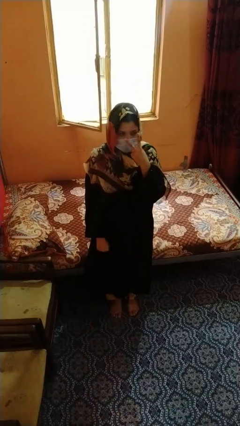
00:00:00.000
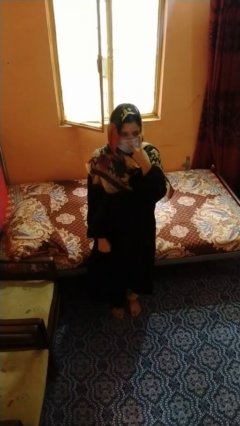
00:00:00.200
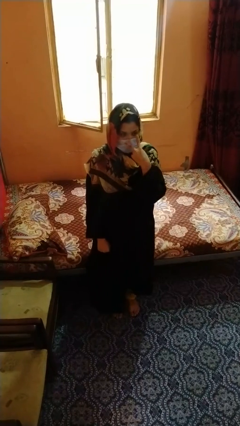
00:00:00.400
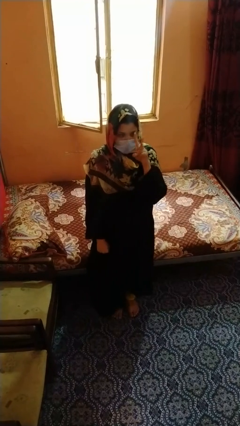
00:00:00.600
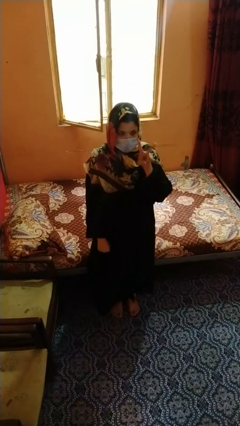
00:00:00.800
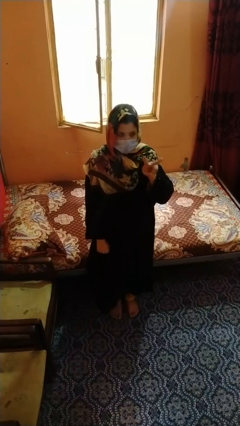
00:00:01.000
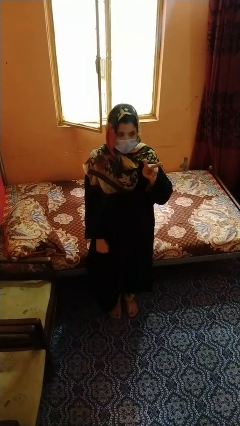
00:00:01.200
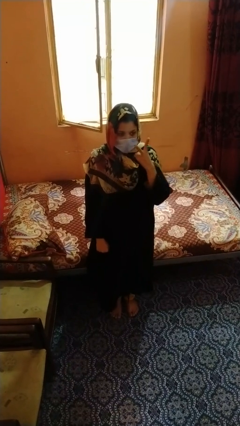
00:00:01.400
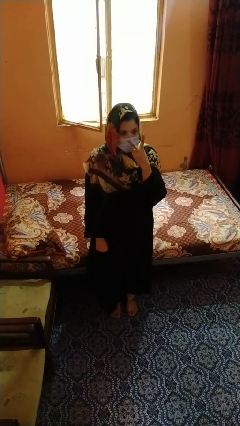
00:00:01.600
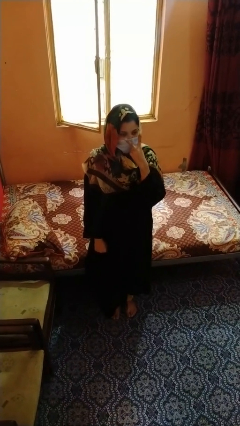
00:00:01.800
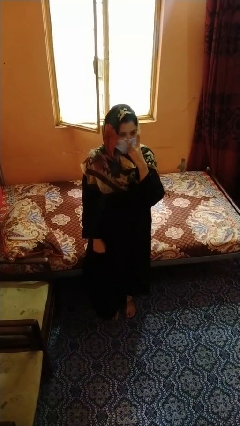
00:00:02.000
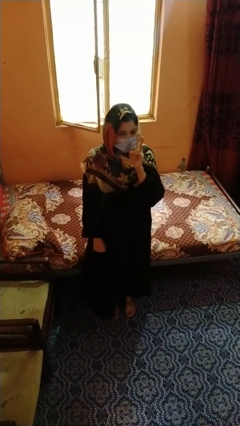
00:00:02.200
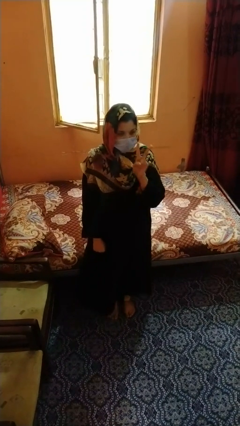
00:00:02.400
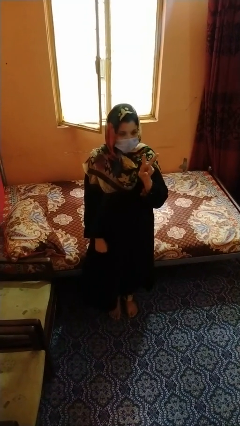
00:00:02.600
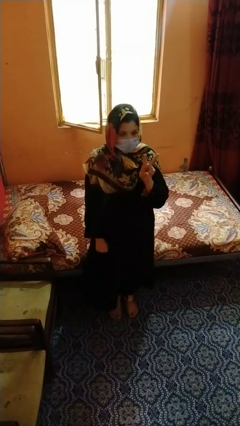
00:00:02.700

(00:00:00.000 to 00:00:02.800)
person gestures watch closely

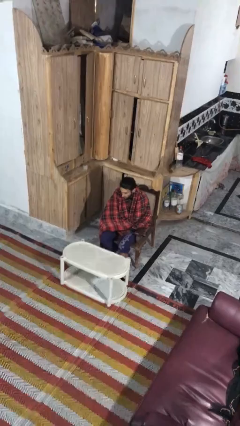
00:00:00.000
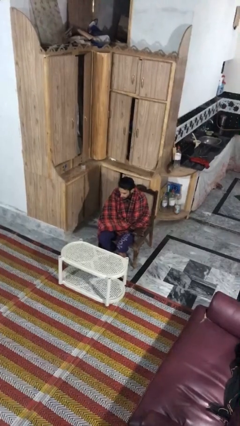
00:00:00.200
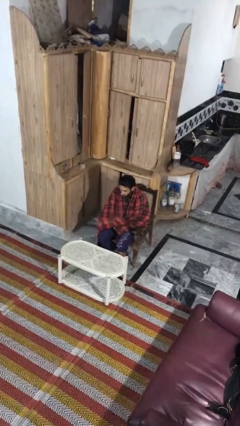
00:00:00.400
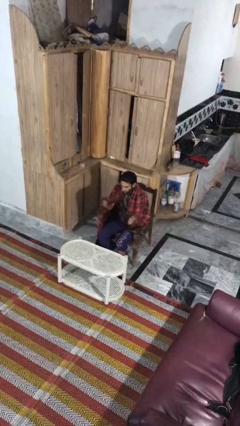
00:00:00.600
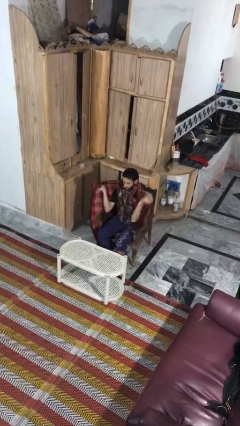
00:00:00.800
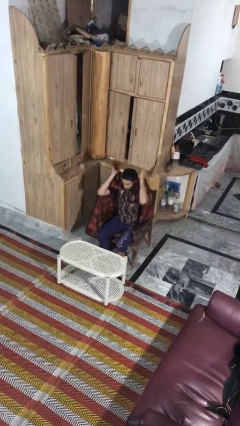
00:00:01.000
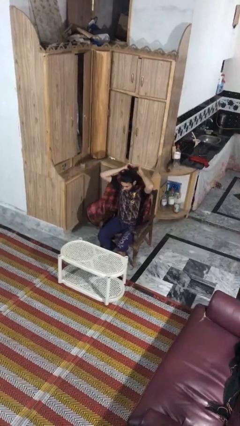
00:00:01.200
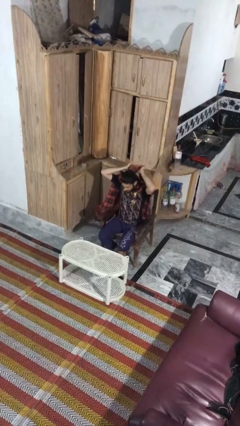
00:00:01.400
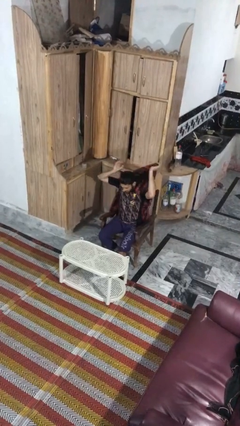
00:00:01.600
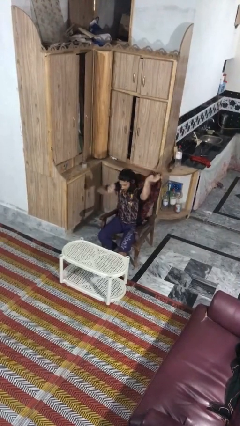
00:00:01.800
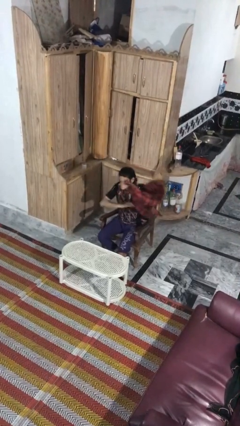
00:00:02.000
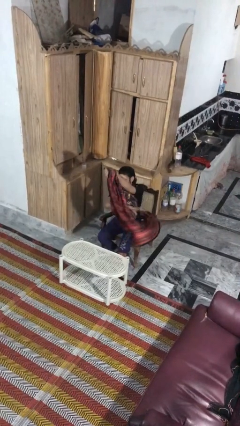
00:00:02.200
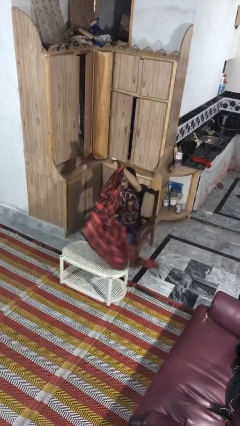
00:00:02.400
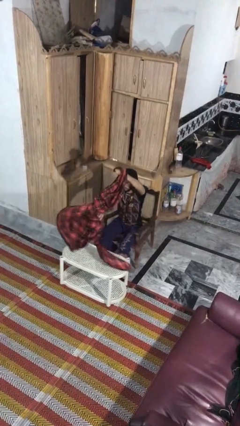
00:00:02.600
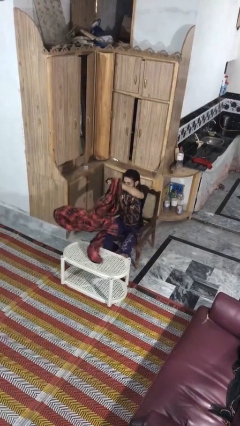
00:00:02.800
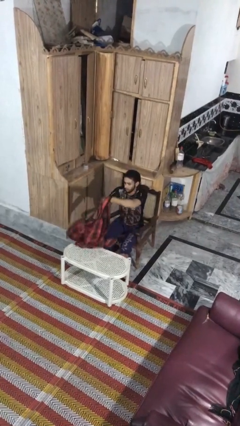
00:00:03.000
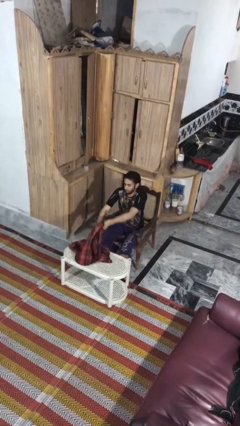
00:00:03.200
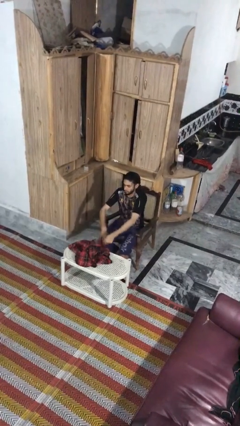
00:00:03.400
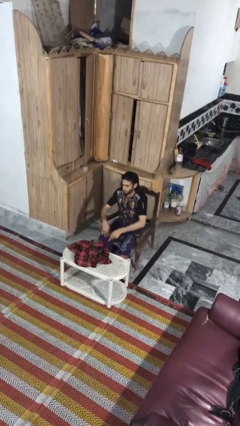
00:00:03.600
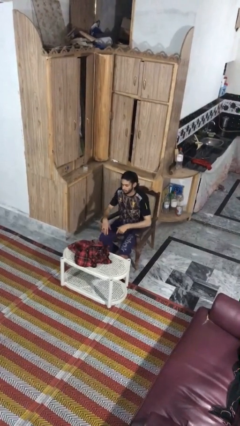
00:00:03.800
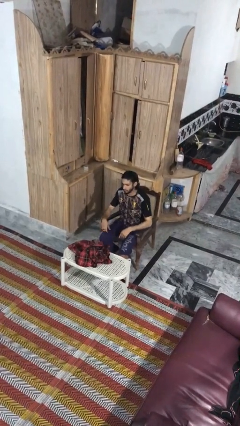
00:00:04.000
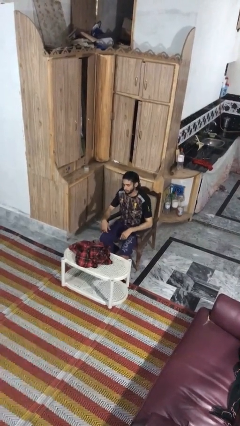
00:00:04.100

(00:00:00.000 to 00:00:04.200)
person uncovers with blanket

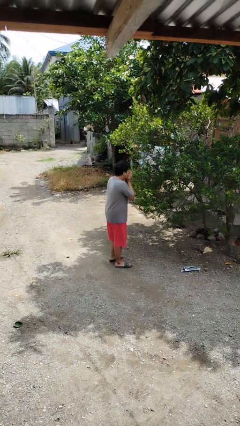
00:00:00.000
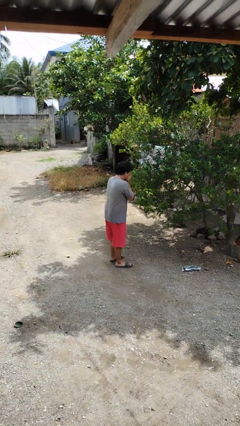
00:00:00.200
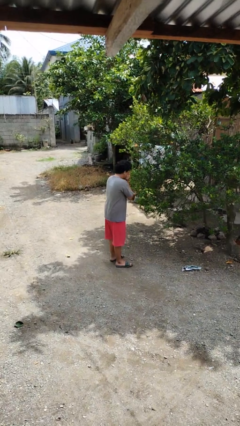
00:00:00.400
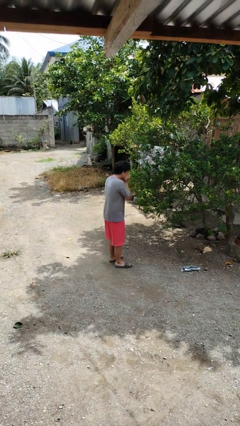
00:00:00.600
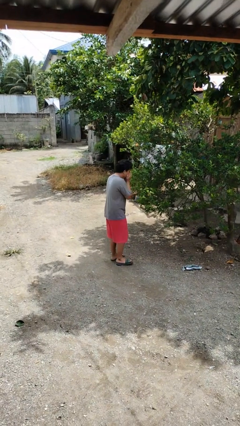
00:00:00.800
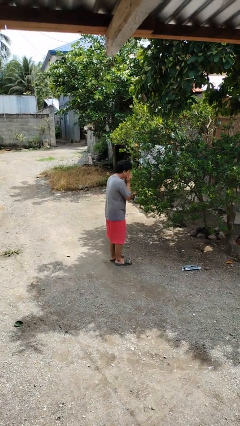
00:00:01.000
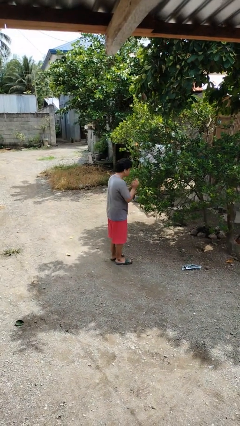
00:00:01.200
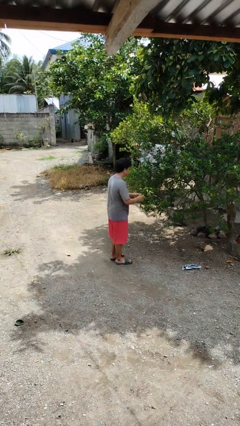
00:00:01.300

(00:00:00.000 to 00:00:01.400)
person blows into hands

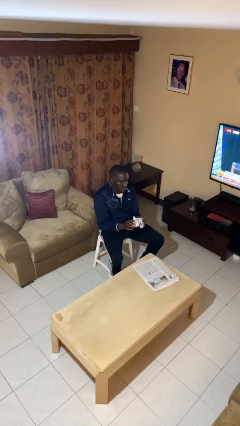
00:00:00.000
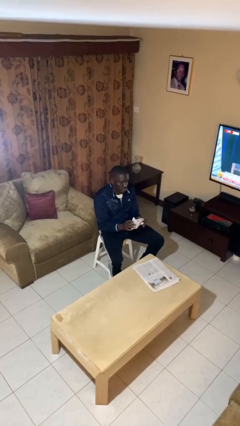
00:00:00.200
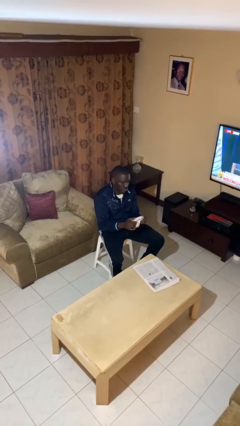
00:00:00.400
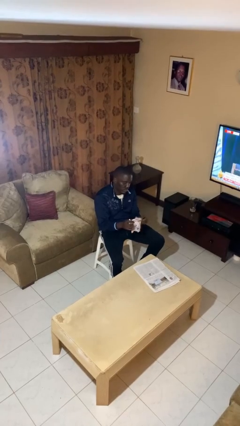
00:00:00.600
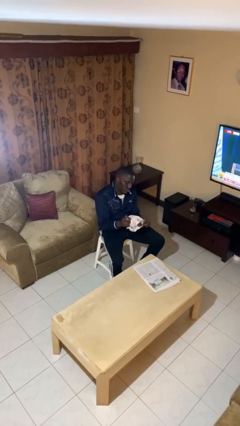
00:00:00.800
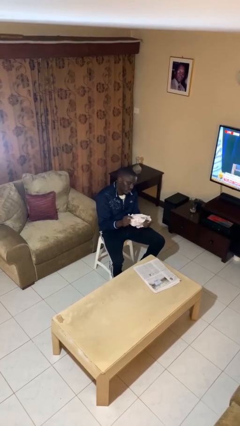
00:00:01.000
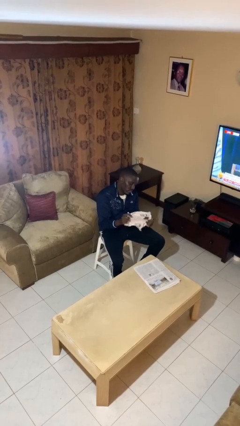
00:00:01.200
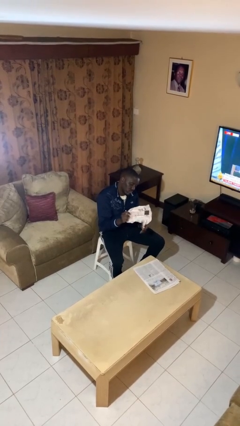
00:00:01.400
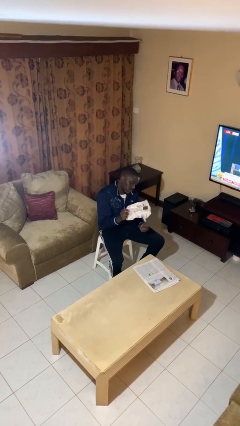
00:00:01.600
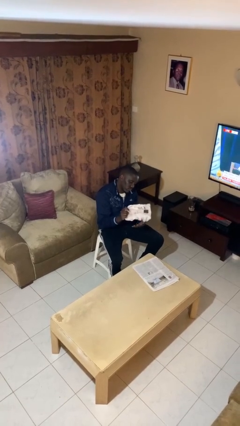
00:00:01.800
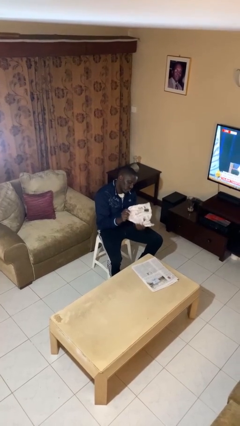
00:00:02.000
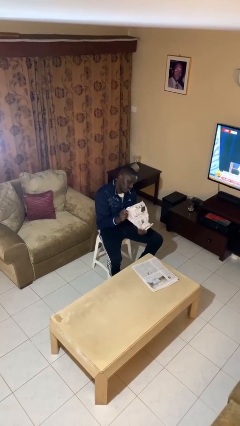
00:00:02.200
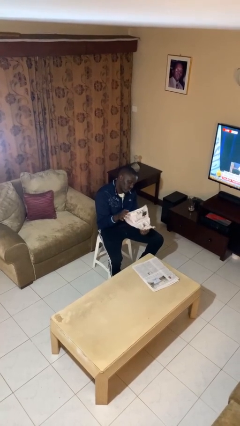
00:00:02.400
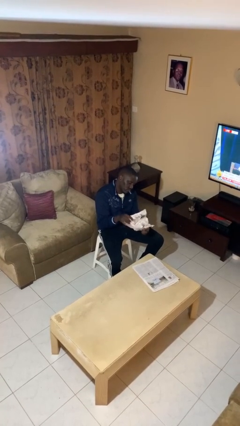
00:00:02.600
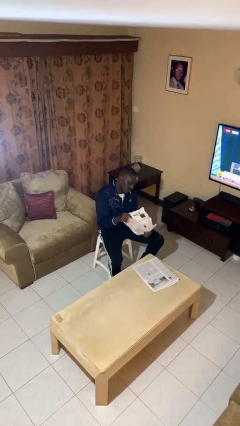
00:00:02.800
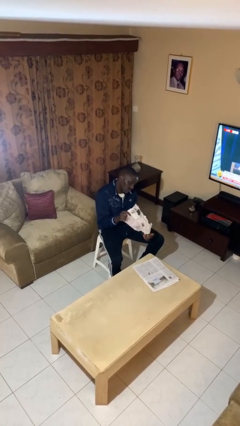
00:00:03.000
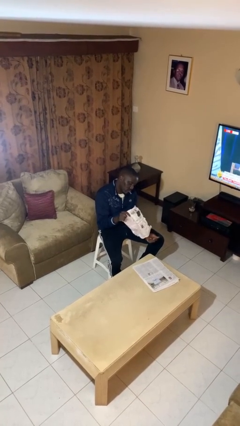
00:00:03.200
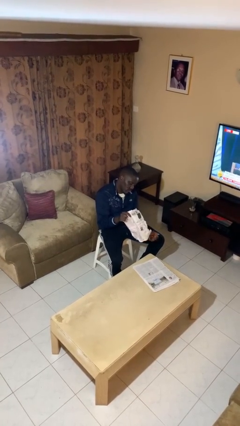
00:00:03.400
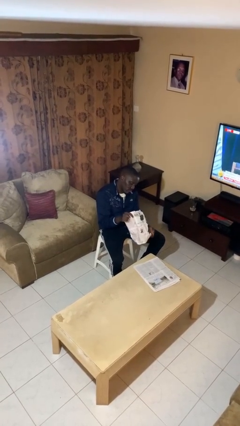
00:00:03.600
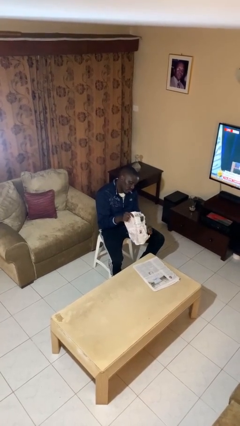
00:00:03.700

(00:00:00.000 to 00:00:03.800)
person crumples paper

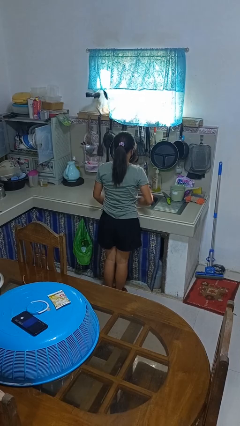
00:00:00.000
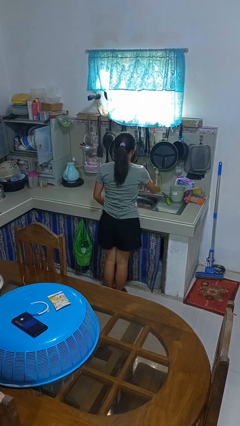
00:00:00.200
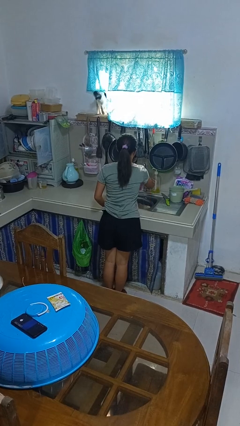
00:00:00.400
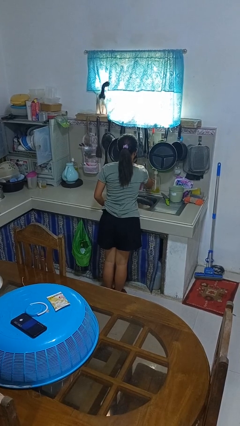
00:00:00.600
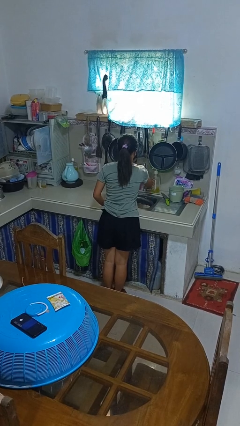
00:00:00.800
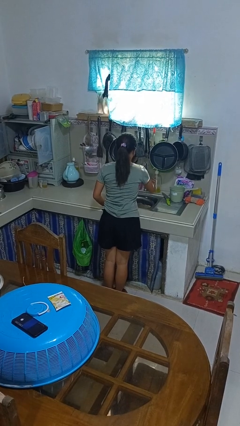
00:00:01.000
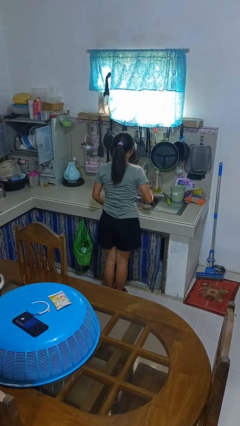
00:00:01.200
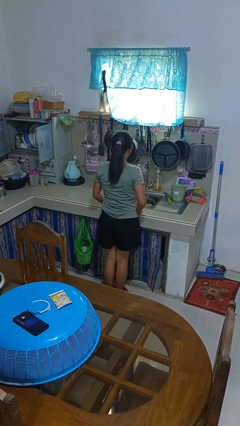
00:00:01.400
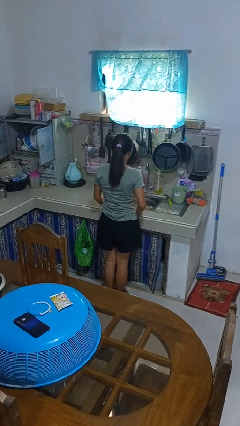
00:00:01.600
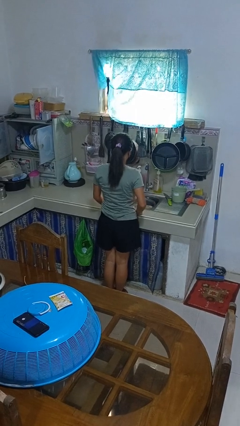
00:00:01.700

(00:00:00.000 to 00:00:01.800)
person turns off faucet

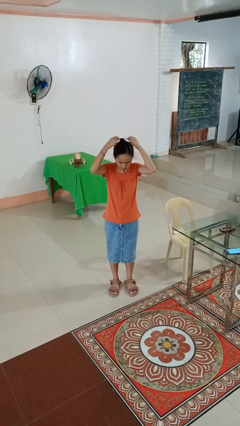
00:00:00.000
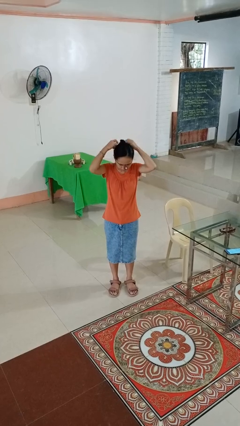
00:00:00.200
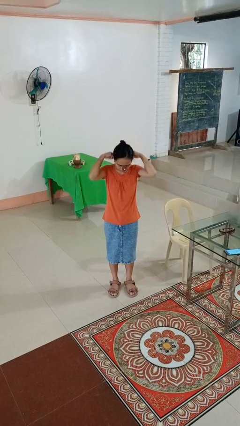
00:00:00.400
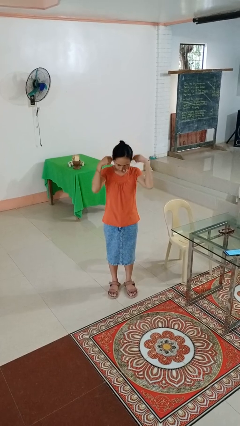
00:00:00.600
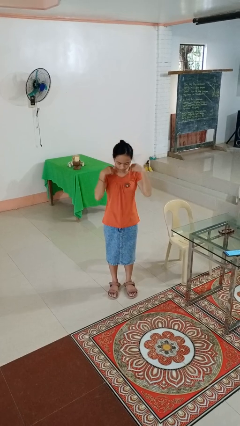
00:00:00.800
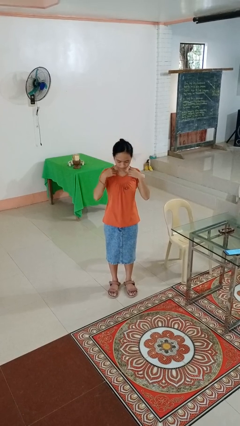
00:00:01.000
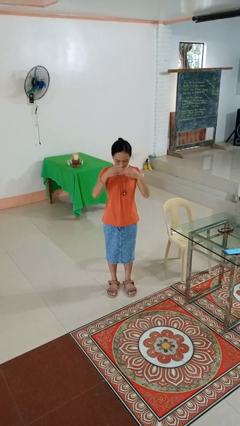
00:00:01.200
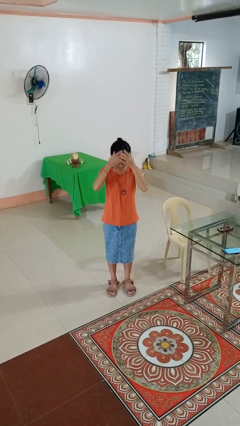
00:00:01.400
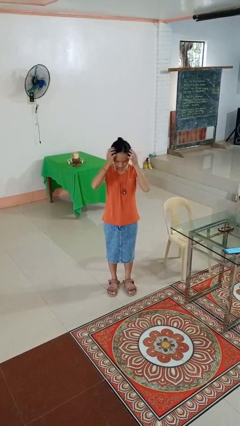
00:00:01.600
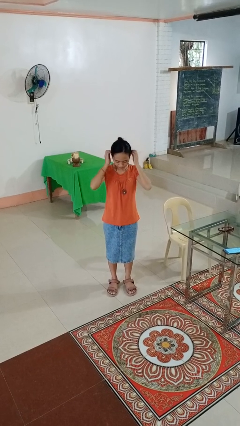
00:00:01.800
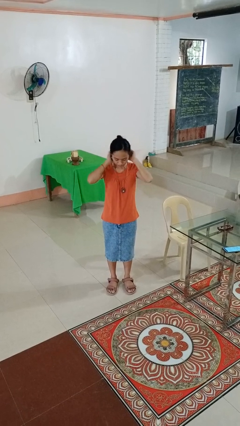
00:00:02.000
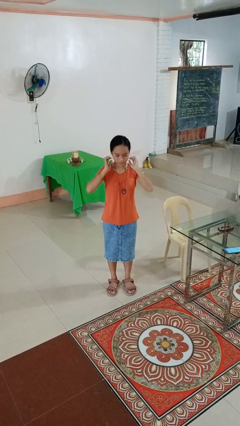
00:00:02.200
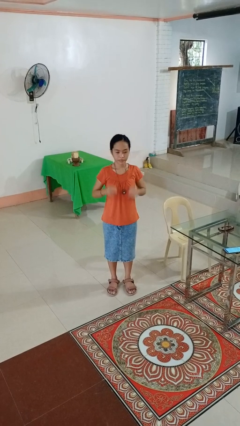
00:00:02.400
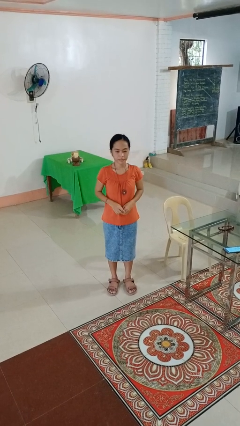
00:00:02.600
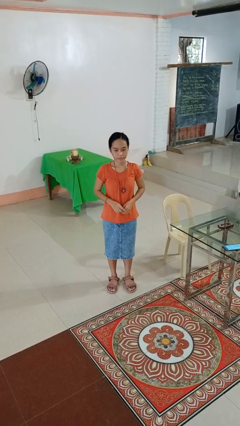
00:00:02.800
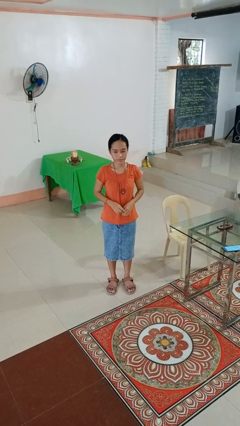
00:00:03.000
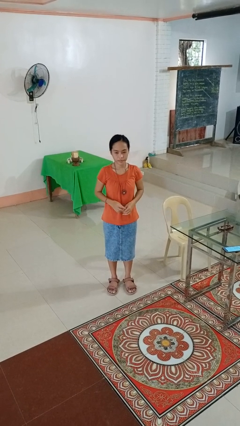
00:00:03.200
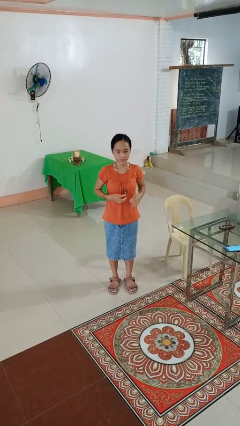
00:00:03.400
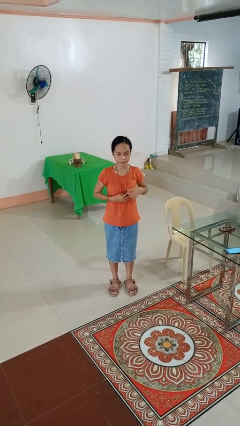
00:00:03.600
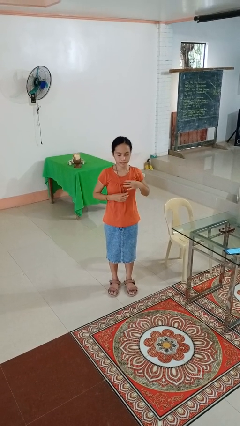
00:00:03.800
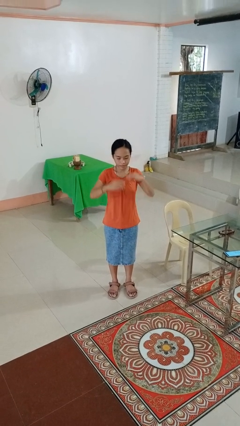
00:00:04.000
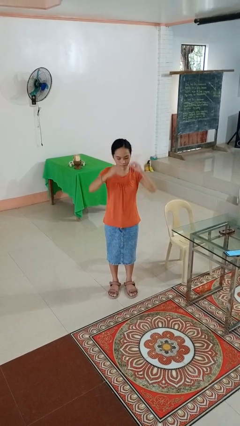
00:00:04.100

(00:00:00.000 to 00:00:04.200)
person puts on necklace
